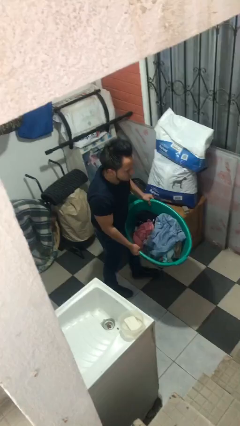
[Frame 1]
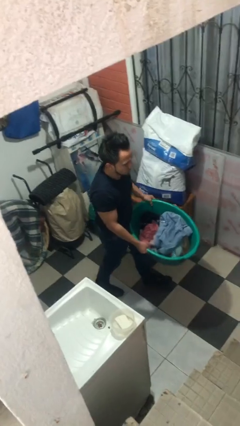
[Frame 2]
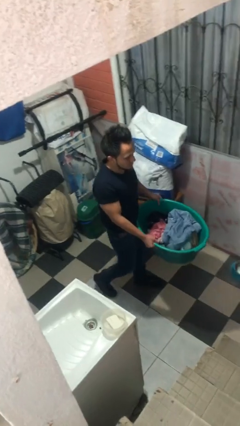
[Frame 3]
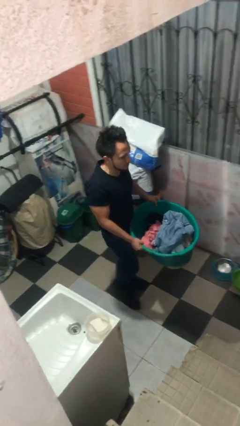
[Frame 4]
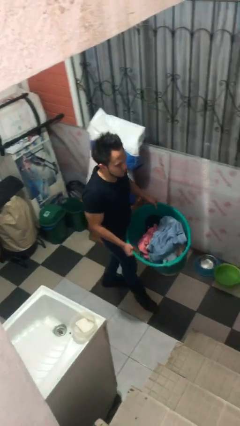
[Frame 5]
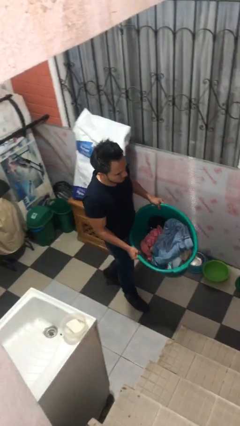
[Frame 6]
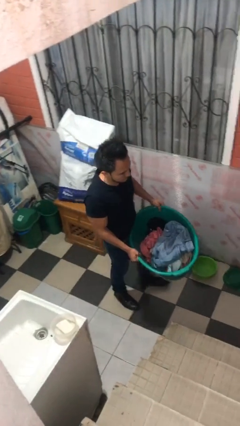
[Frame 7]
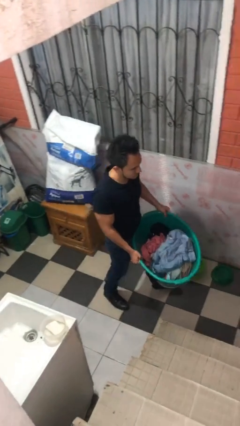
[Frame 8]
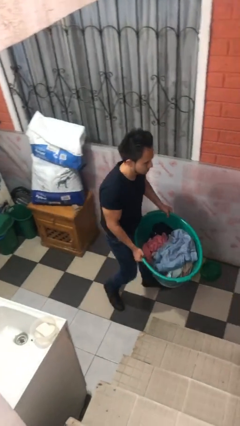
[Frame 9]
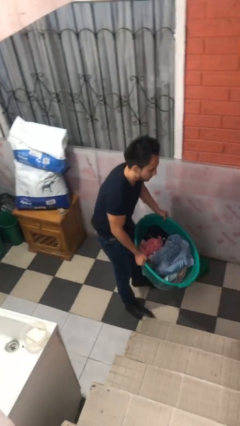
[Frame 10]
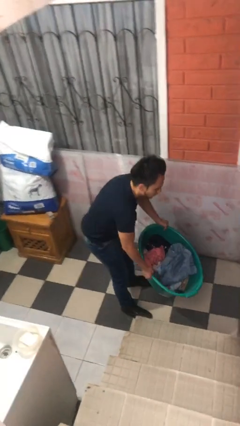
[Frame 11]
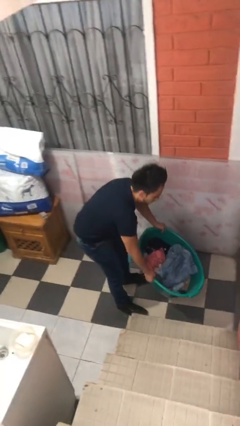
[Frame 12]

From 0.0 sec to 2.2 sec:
person carries heavy object

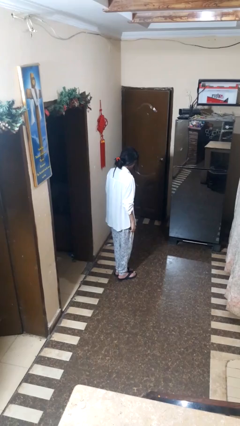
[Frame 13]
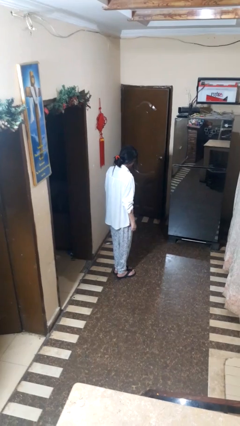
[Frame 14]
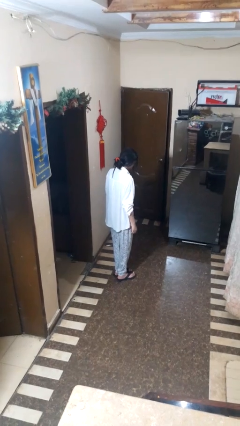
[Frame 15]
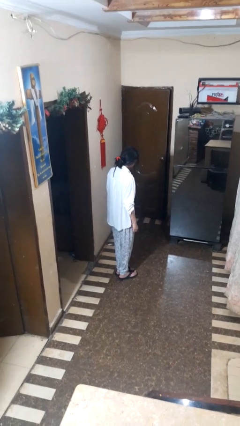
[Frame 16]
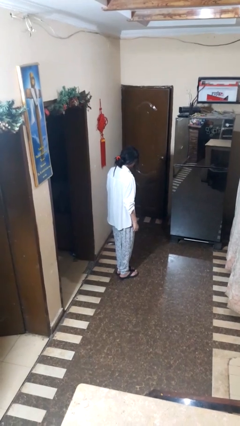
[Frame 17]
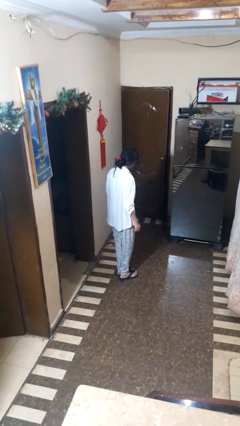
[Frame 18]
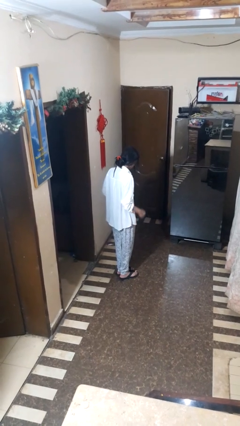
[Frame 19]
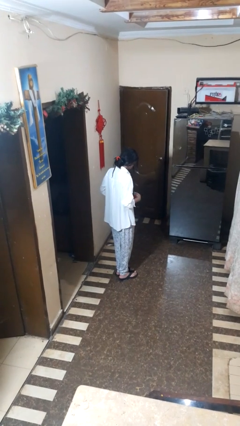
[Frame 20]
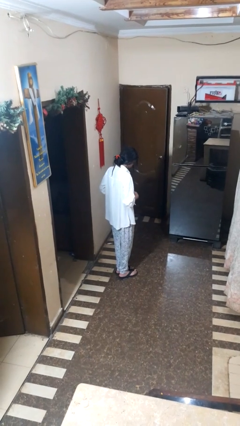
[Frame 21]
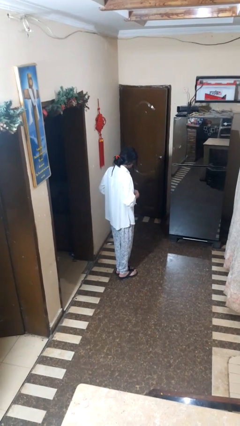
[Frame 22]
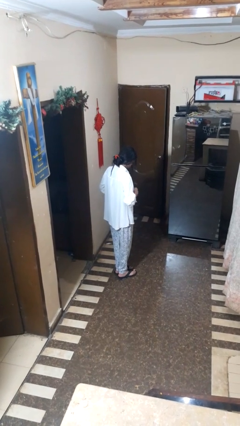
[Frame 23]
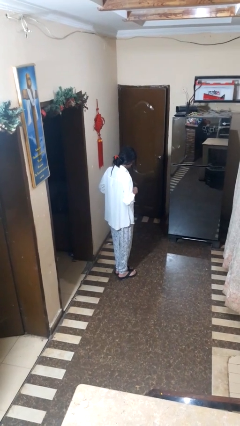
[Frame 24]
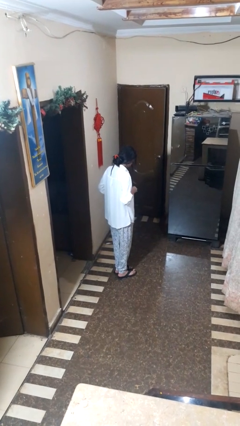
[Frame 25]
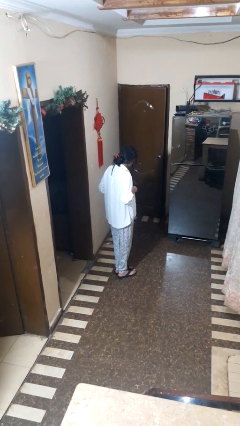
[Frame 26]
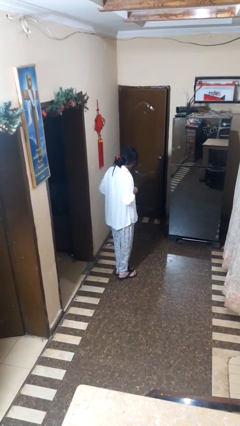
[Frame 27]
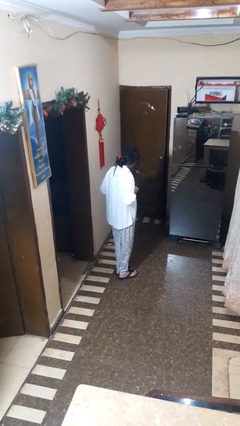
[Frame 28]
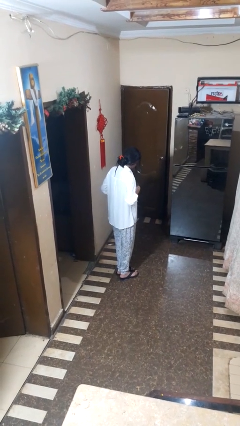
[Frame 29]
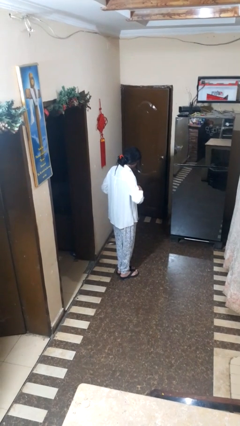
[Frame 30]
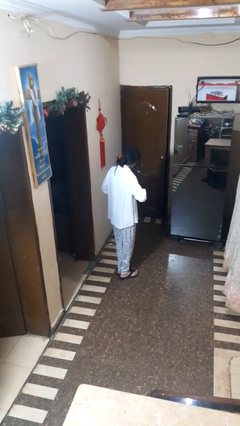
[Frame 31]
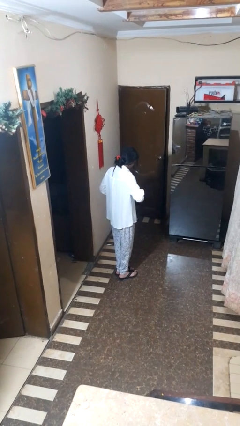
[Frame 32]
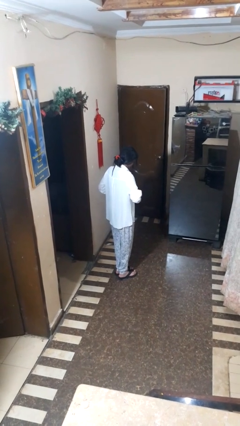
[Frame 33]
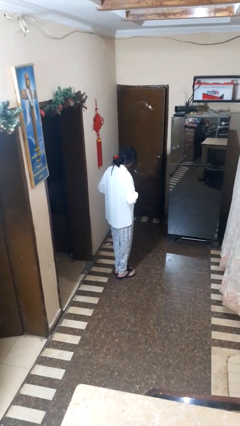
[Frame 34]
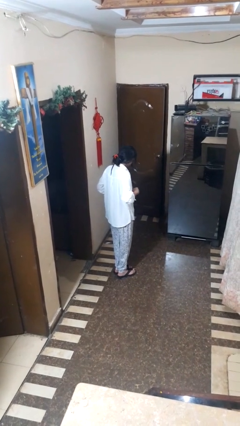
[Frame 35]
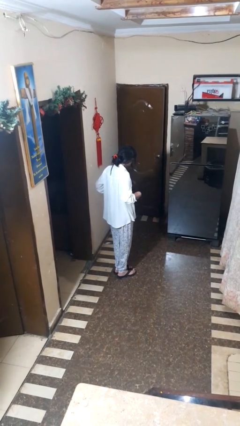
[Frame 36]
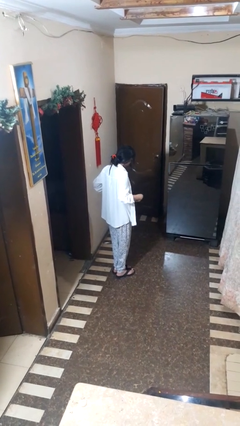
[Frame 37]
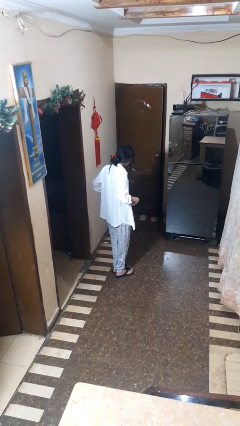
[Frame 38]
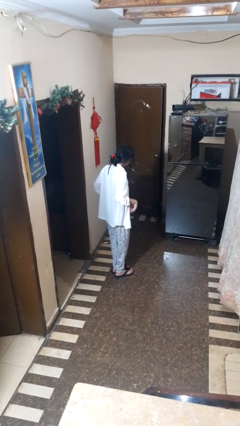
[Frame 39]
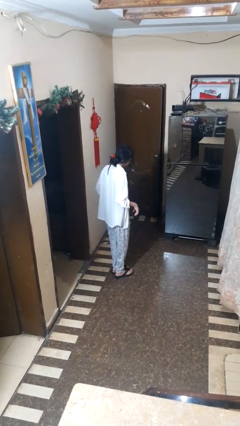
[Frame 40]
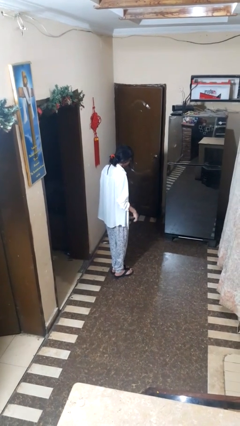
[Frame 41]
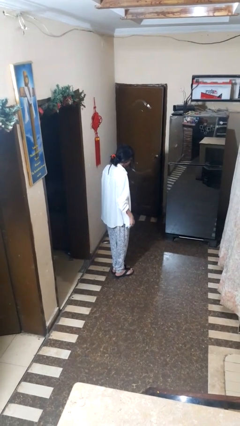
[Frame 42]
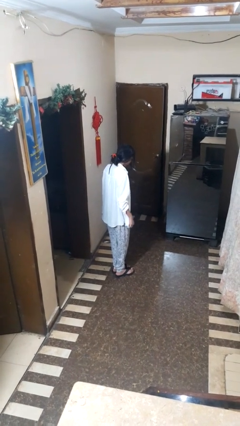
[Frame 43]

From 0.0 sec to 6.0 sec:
person unbuttons shirt

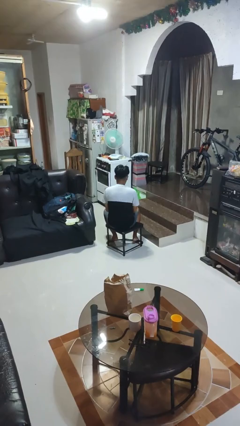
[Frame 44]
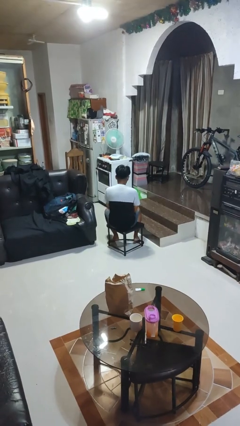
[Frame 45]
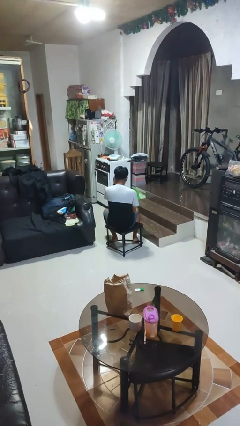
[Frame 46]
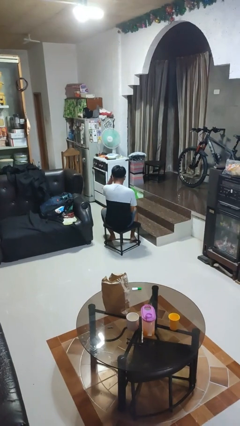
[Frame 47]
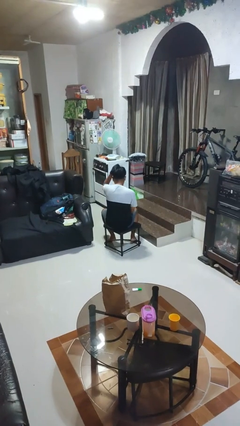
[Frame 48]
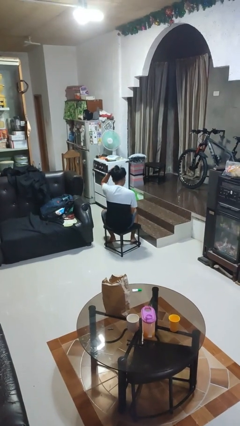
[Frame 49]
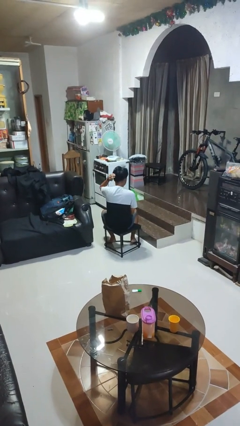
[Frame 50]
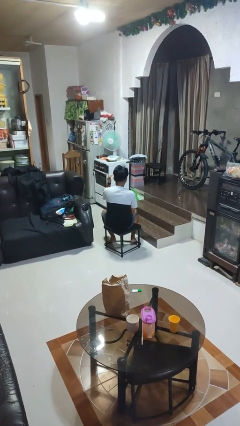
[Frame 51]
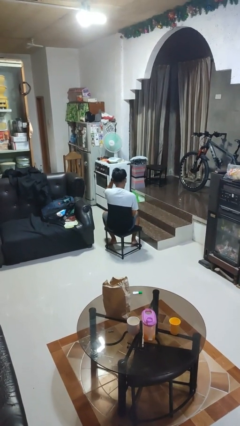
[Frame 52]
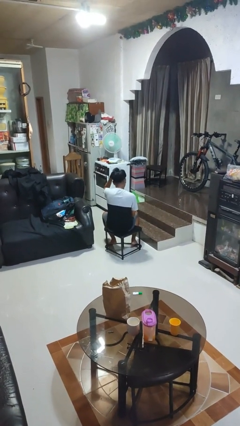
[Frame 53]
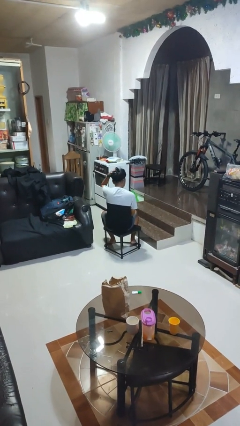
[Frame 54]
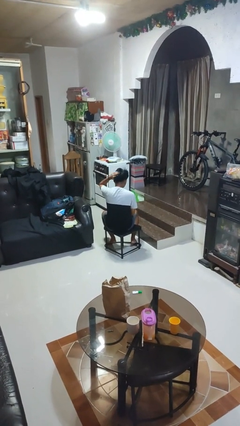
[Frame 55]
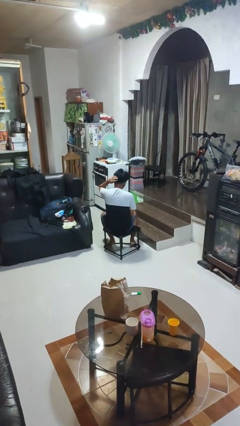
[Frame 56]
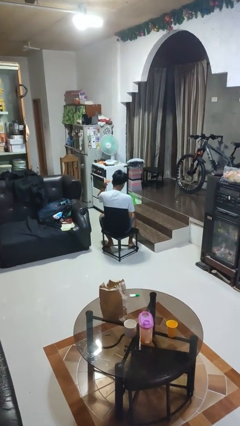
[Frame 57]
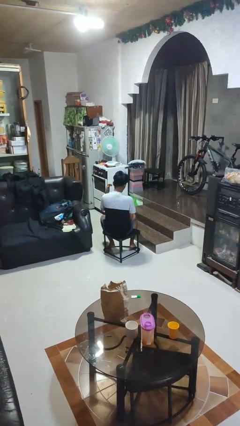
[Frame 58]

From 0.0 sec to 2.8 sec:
person strokes hair

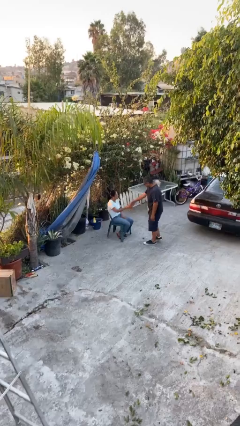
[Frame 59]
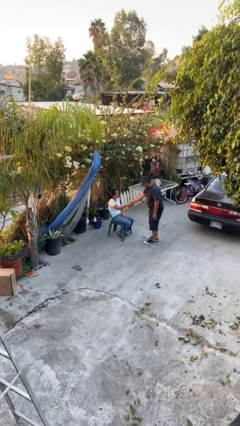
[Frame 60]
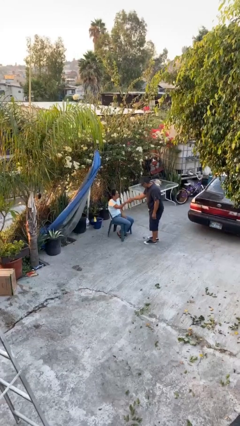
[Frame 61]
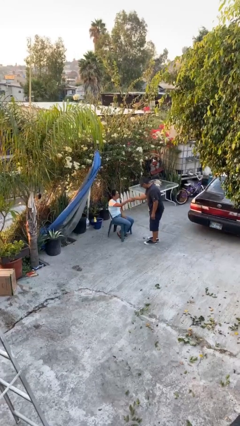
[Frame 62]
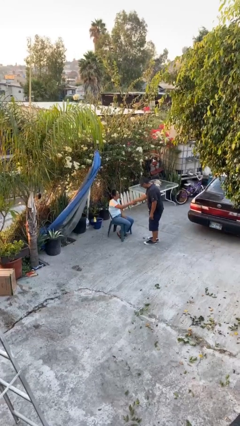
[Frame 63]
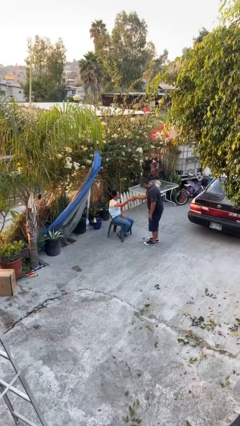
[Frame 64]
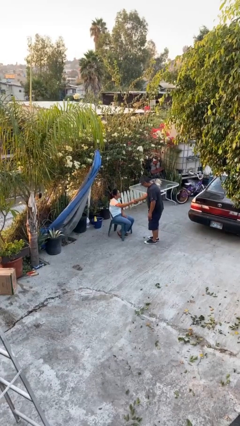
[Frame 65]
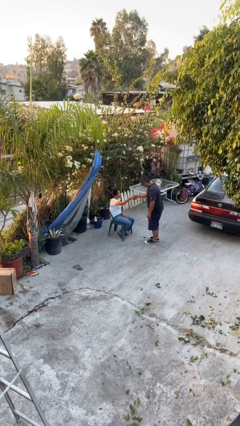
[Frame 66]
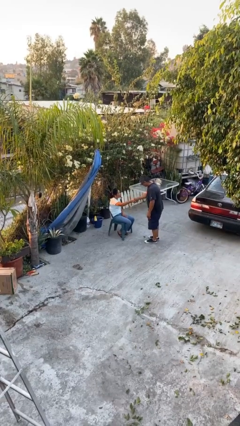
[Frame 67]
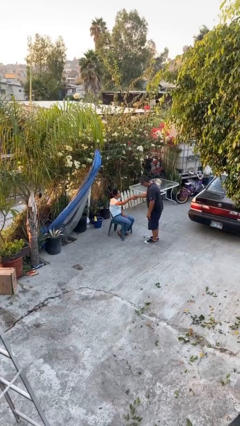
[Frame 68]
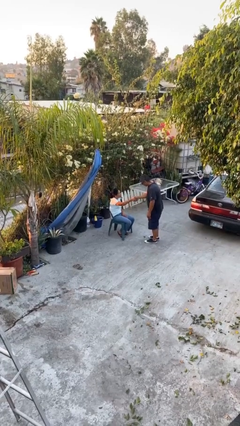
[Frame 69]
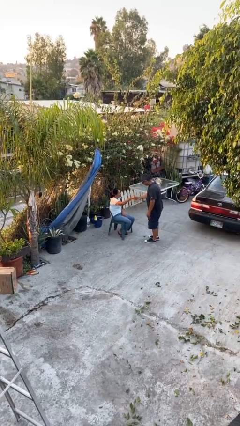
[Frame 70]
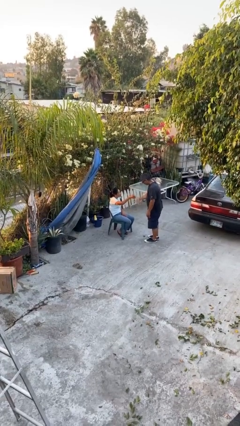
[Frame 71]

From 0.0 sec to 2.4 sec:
person shakes hand

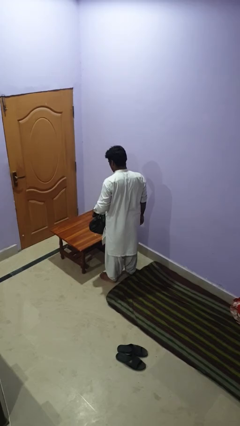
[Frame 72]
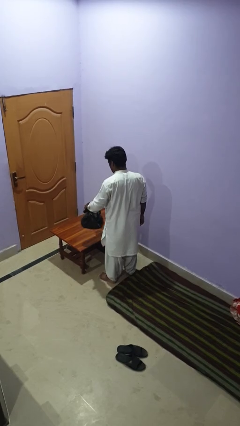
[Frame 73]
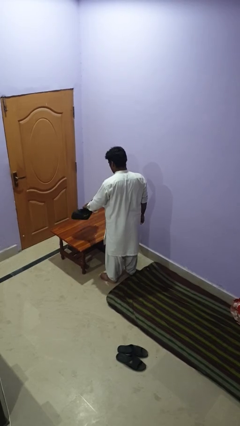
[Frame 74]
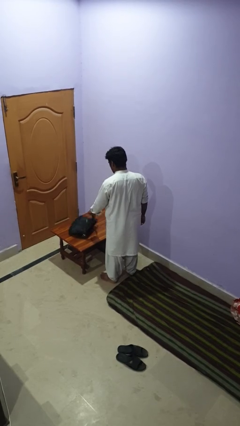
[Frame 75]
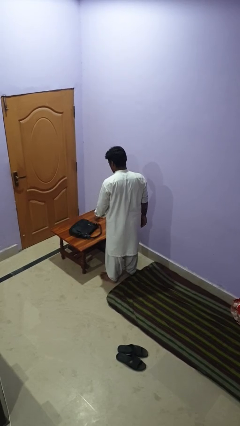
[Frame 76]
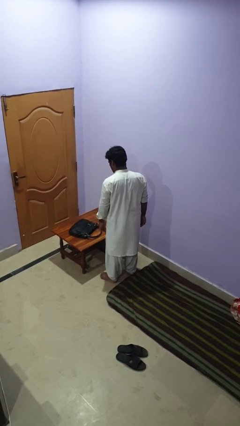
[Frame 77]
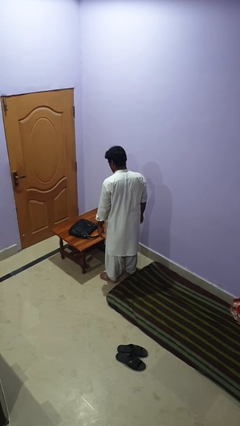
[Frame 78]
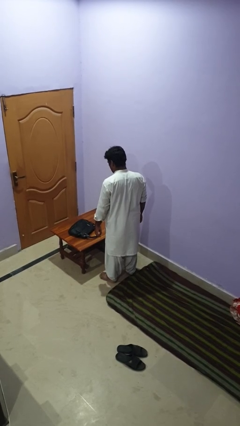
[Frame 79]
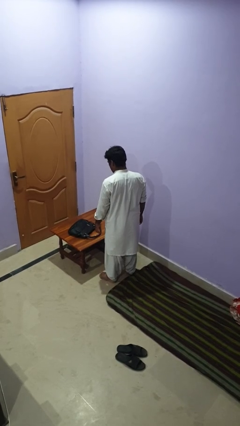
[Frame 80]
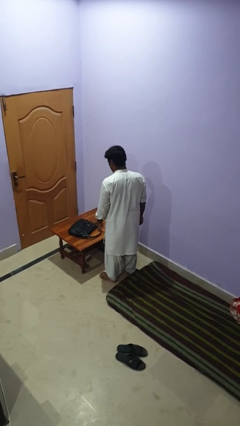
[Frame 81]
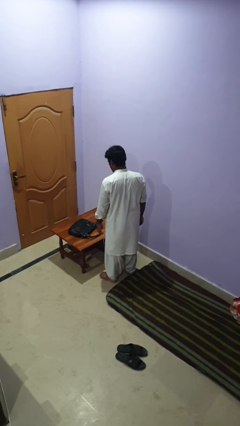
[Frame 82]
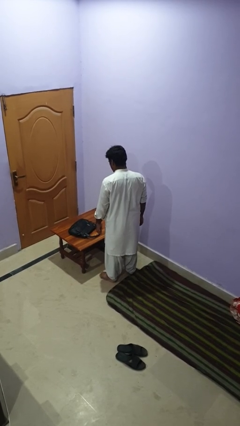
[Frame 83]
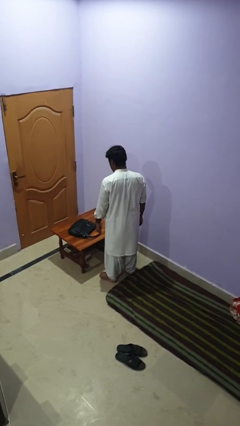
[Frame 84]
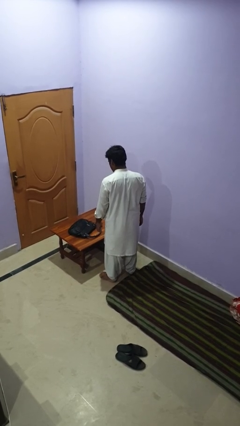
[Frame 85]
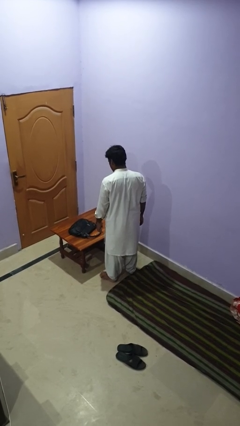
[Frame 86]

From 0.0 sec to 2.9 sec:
person throws object on table

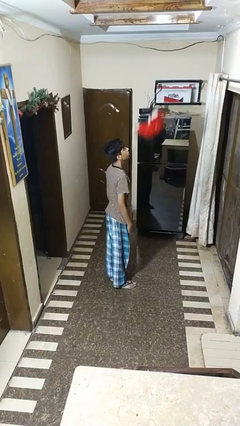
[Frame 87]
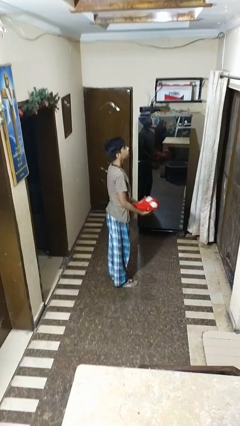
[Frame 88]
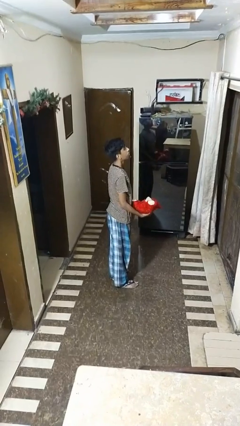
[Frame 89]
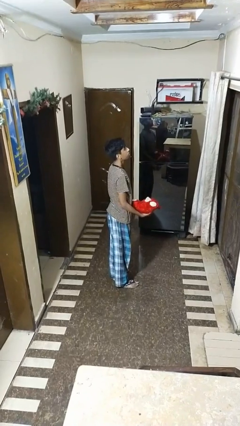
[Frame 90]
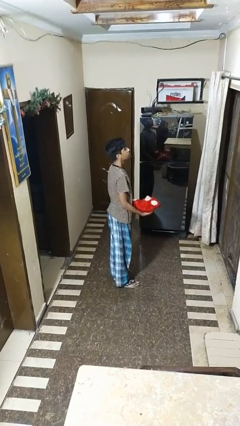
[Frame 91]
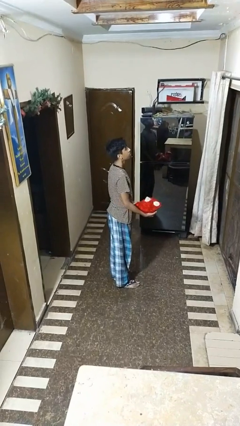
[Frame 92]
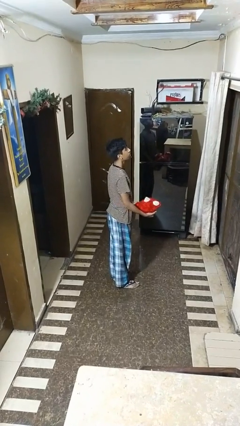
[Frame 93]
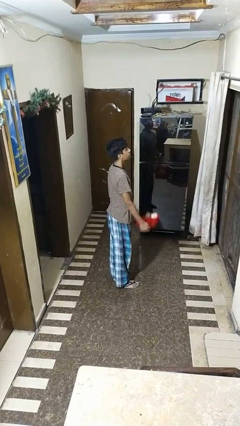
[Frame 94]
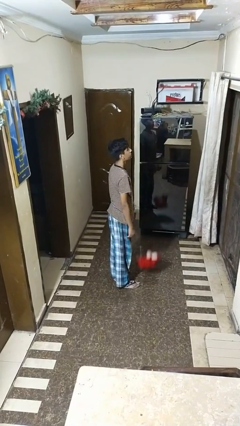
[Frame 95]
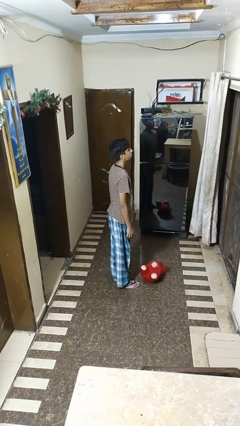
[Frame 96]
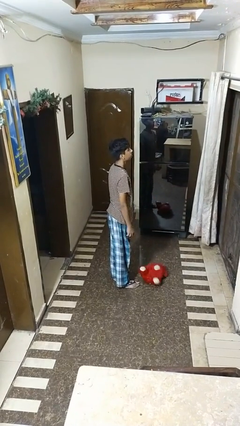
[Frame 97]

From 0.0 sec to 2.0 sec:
person catches dropped object
